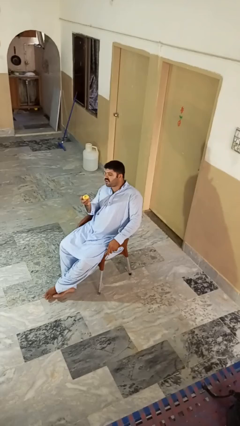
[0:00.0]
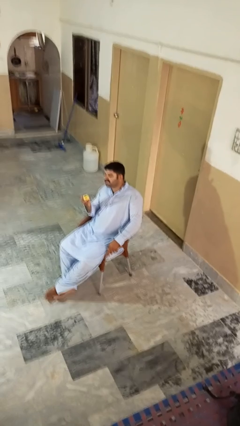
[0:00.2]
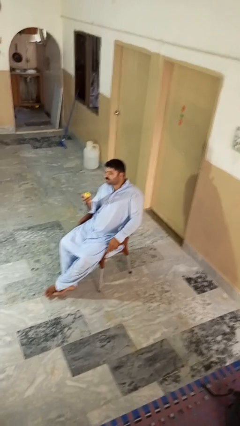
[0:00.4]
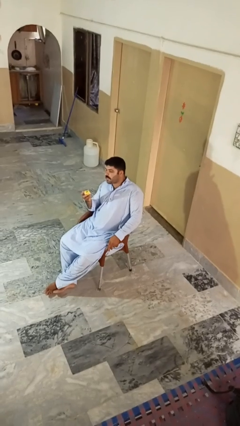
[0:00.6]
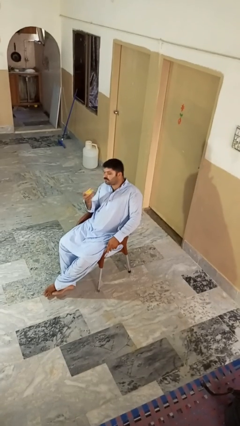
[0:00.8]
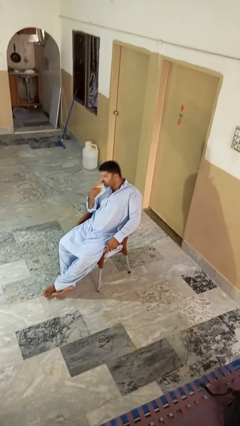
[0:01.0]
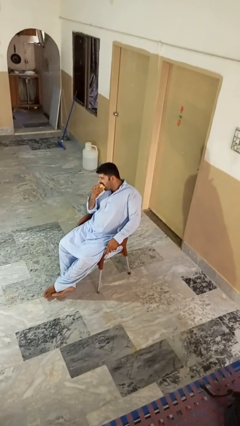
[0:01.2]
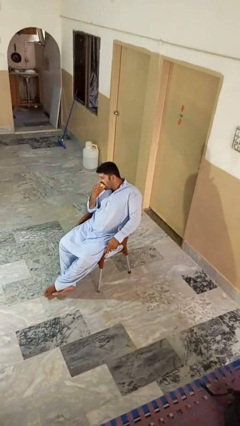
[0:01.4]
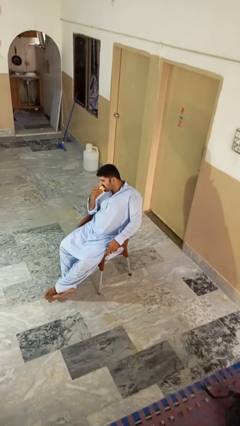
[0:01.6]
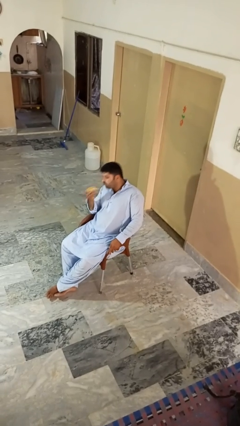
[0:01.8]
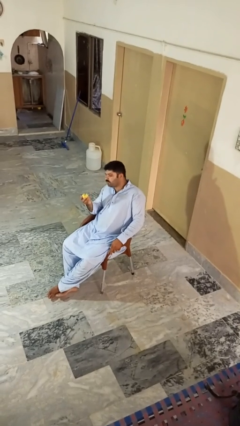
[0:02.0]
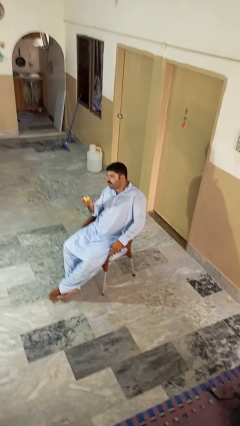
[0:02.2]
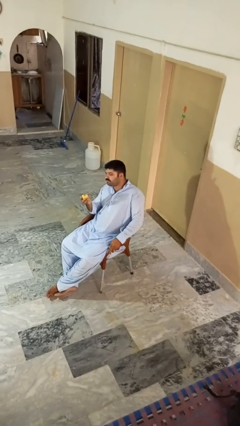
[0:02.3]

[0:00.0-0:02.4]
person eats apple

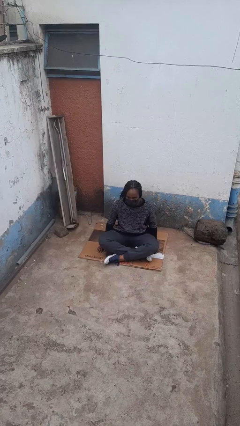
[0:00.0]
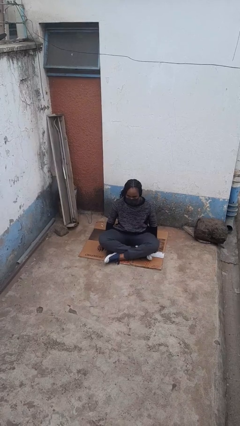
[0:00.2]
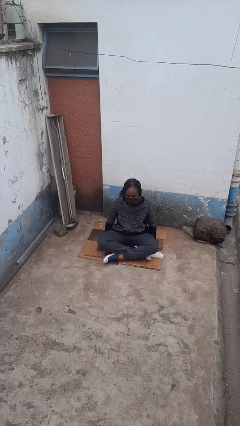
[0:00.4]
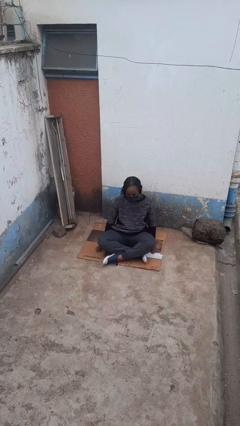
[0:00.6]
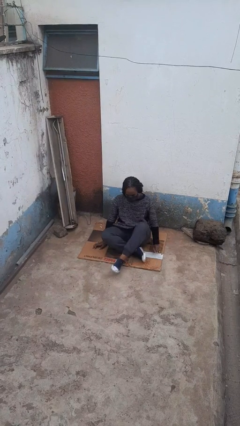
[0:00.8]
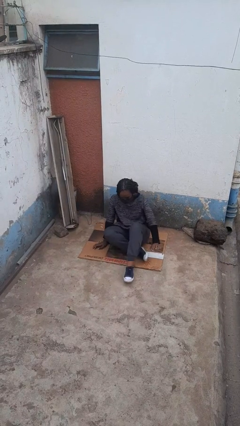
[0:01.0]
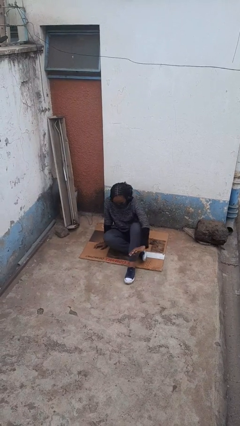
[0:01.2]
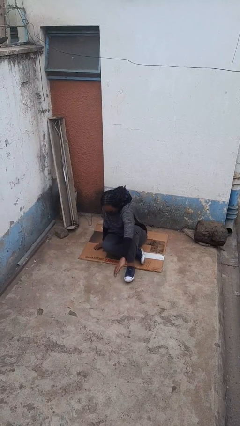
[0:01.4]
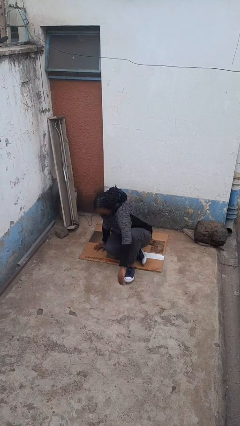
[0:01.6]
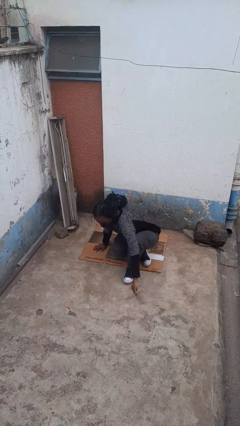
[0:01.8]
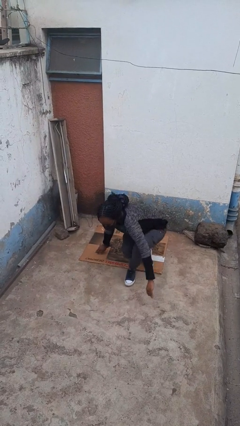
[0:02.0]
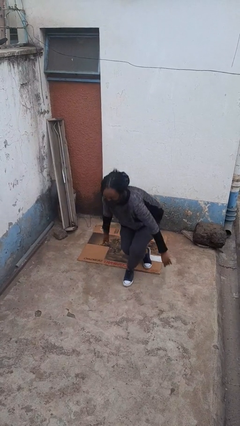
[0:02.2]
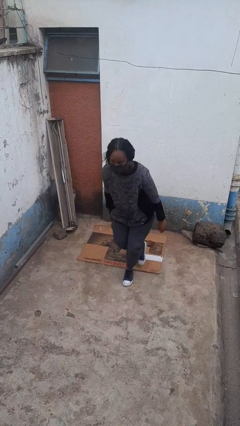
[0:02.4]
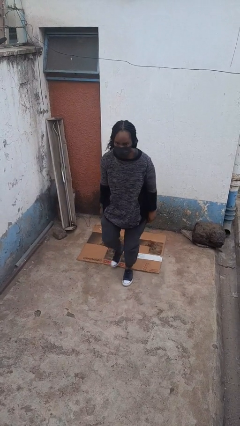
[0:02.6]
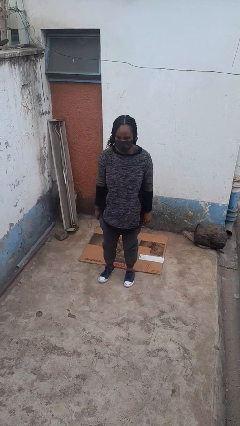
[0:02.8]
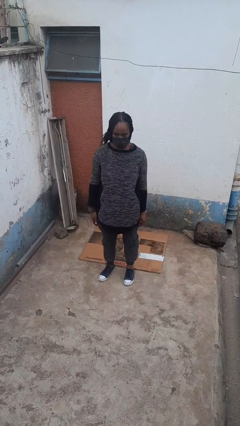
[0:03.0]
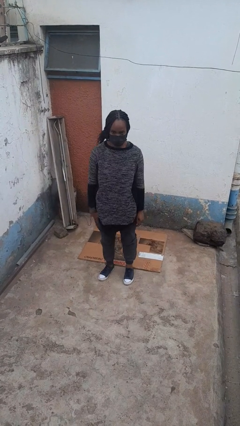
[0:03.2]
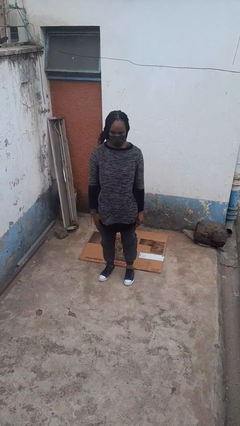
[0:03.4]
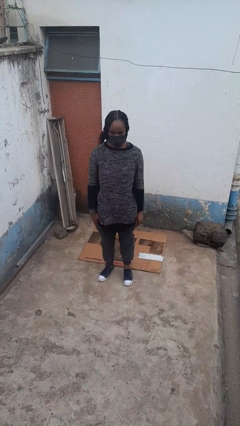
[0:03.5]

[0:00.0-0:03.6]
person stands up from floor

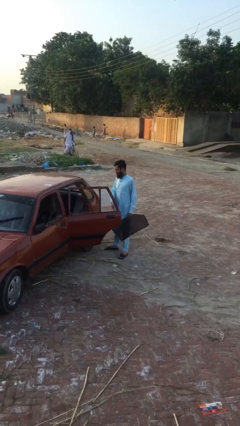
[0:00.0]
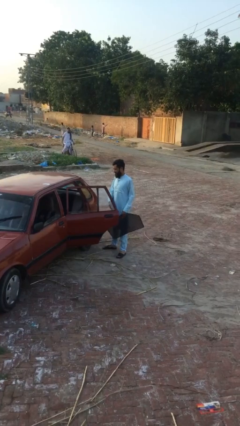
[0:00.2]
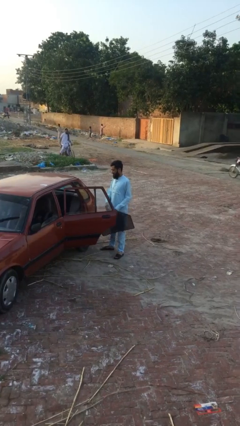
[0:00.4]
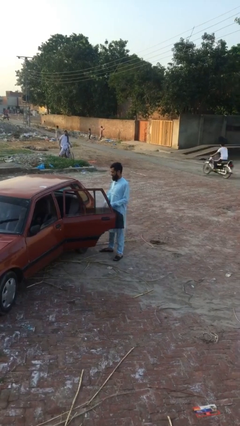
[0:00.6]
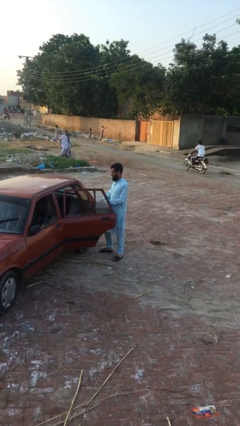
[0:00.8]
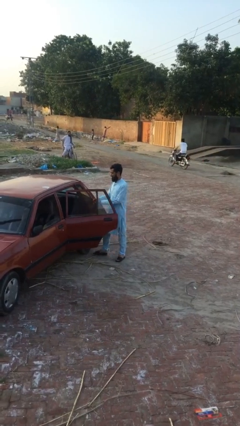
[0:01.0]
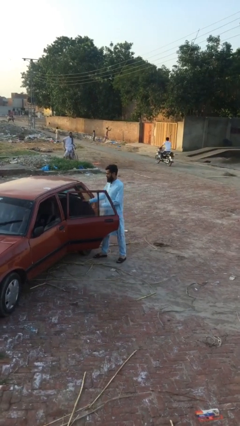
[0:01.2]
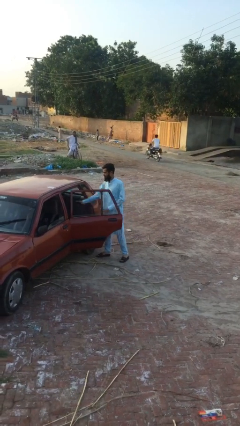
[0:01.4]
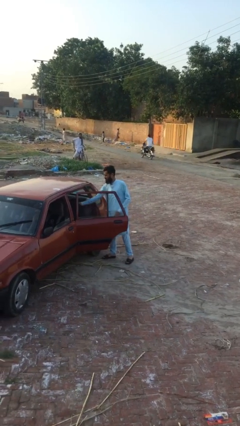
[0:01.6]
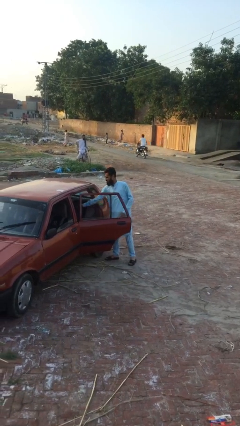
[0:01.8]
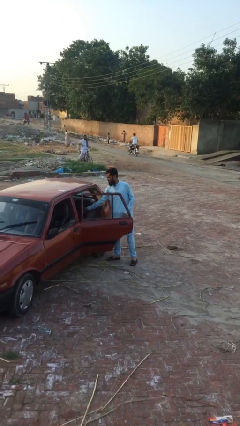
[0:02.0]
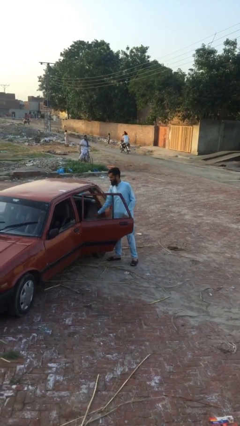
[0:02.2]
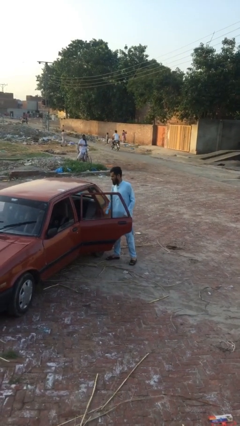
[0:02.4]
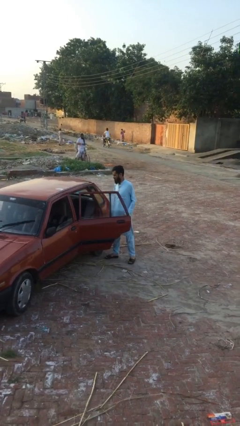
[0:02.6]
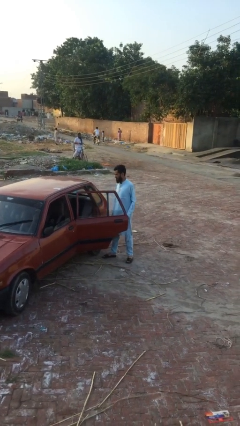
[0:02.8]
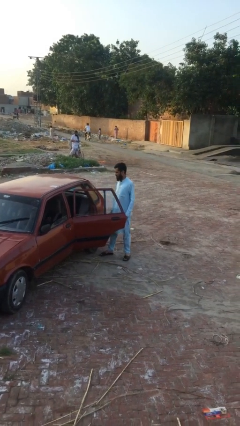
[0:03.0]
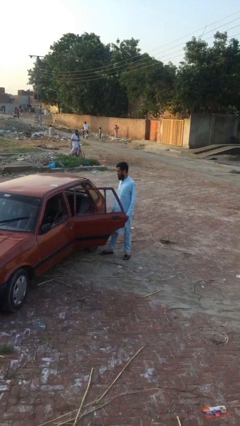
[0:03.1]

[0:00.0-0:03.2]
person loads car

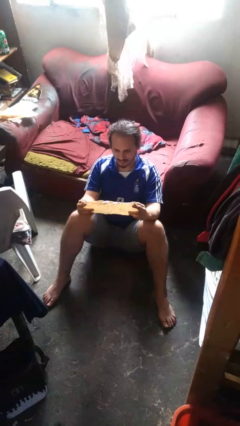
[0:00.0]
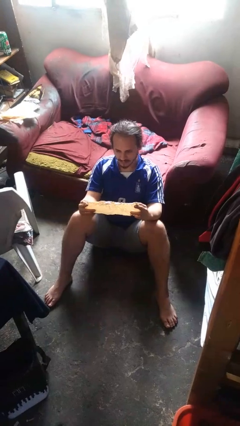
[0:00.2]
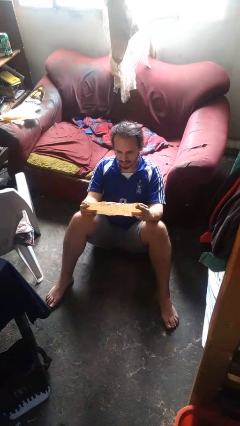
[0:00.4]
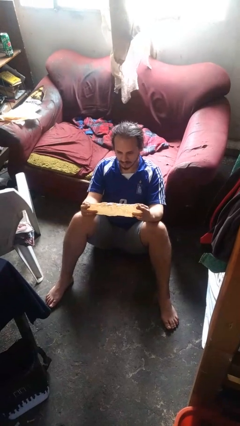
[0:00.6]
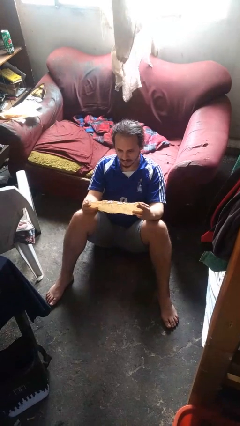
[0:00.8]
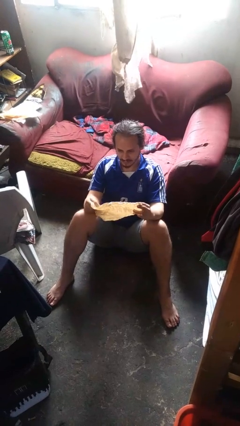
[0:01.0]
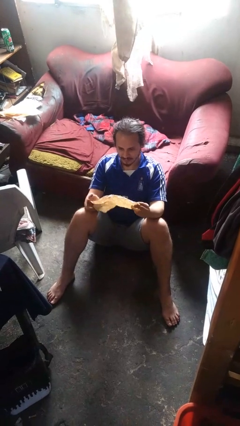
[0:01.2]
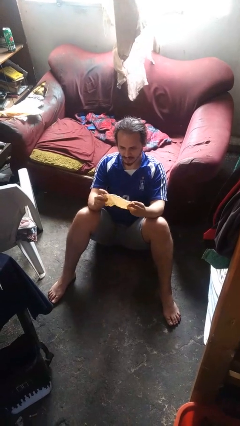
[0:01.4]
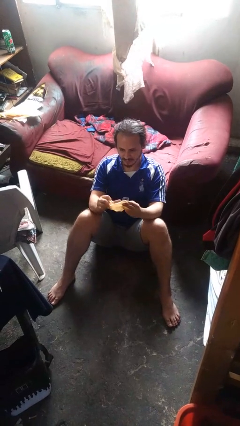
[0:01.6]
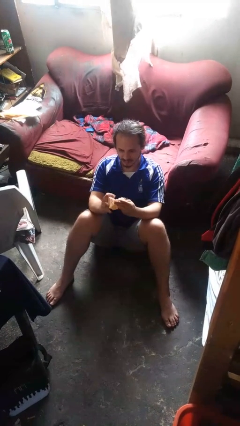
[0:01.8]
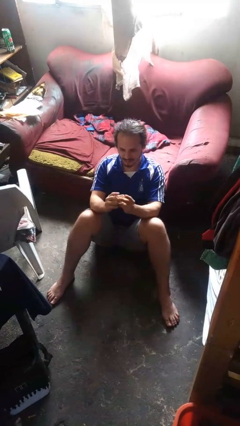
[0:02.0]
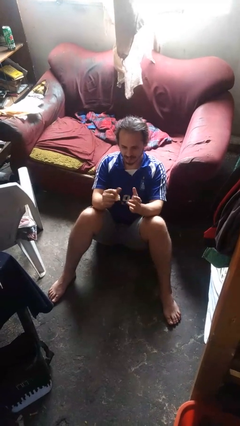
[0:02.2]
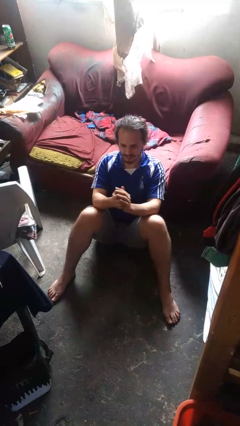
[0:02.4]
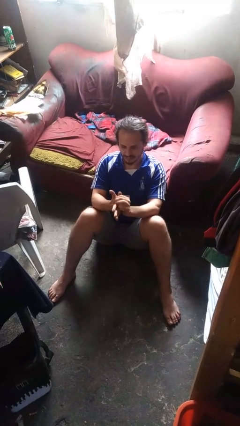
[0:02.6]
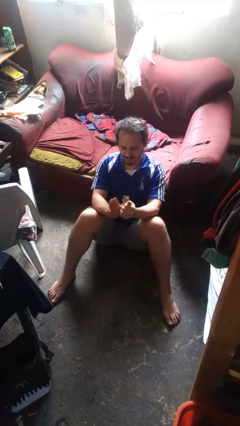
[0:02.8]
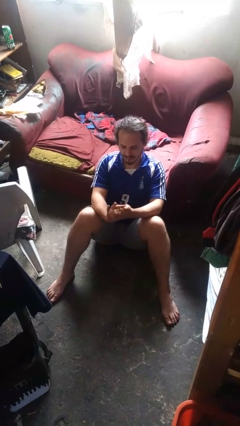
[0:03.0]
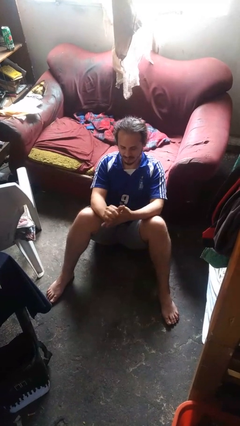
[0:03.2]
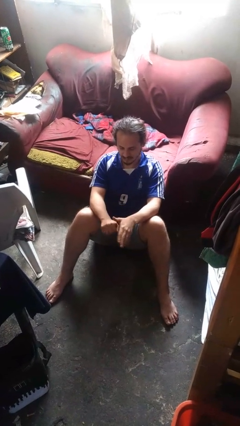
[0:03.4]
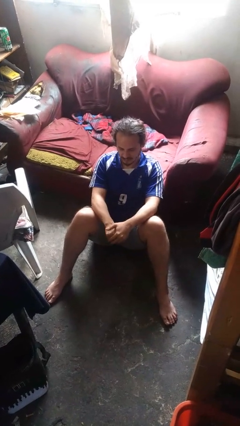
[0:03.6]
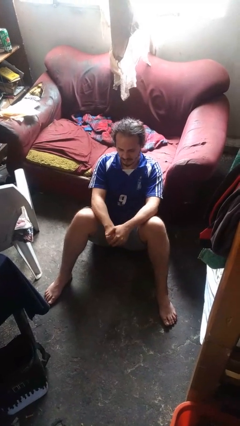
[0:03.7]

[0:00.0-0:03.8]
person crumples paper

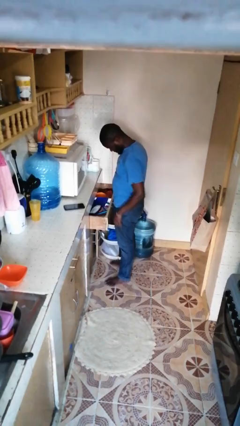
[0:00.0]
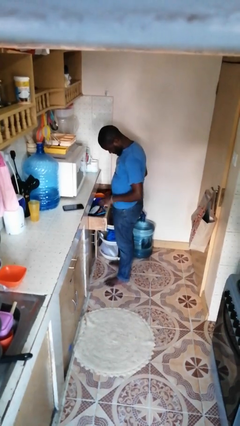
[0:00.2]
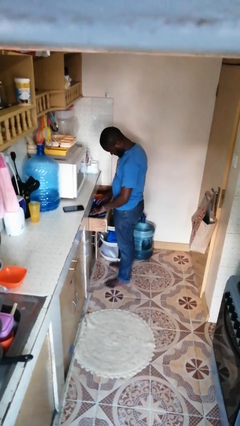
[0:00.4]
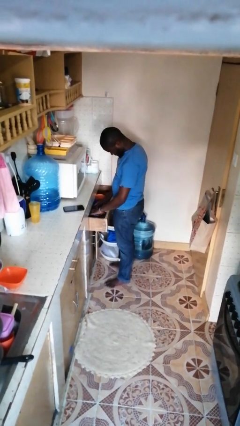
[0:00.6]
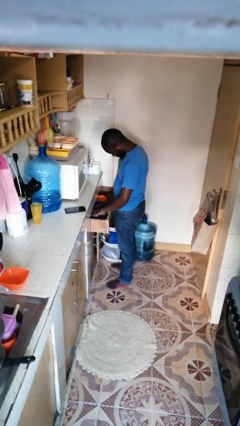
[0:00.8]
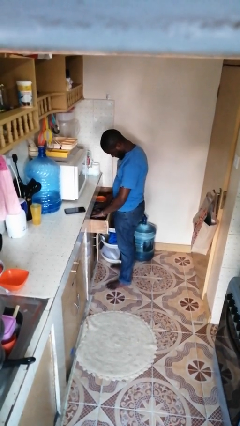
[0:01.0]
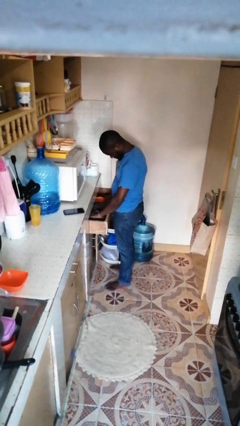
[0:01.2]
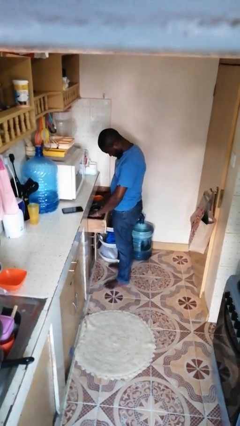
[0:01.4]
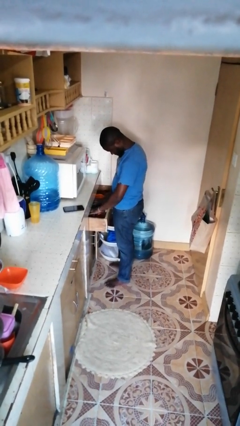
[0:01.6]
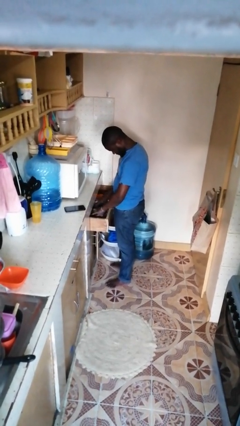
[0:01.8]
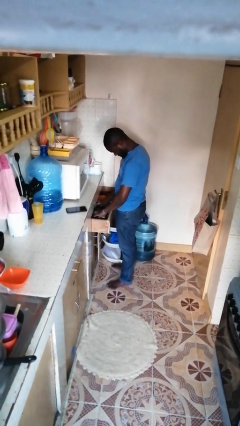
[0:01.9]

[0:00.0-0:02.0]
person searches in kitchen drawer

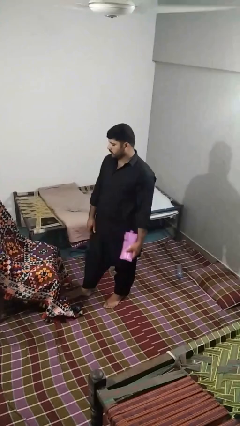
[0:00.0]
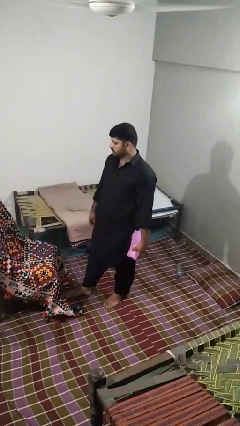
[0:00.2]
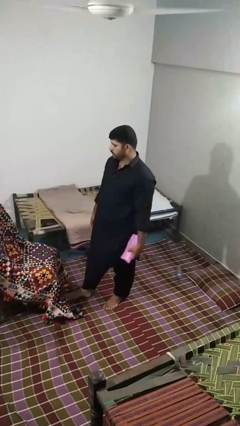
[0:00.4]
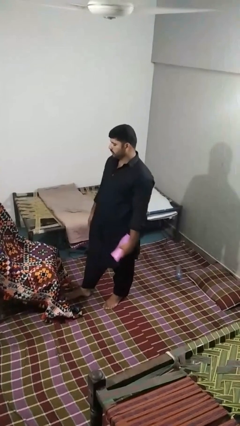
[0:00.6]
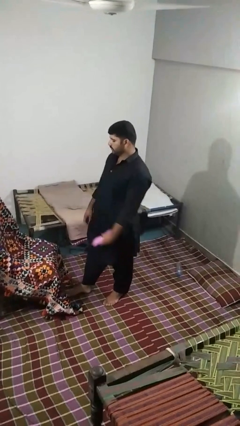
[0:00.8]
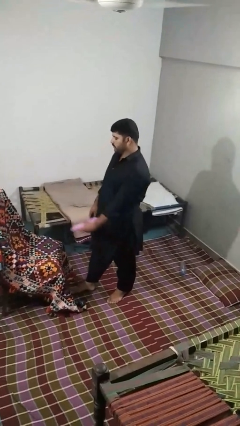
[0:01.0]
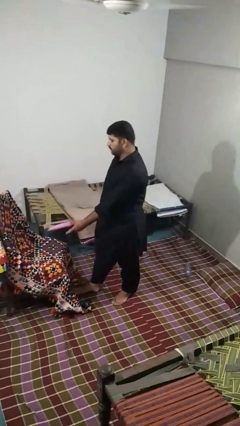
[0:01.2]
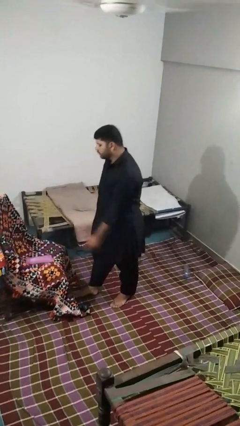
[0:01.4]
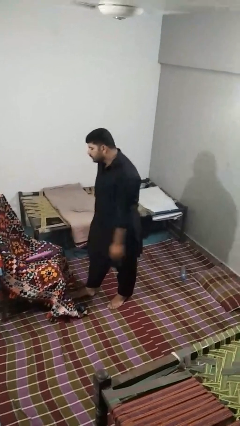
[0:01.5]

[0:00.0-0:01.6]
person puts down object on couch

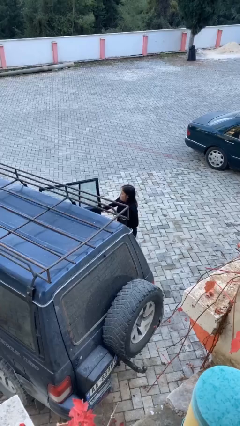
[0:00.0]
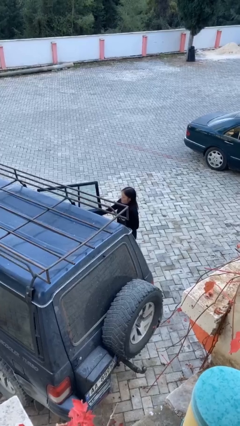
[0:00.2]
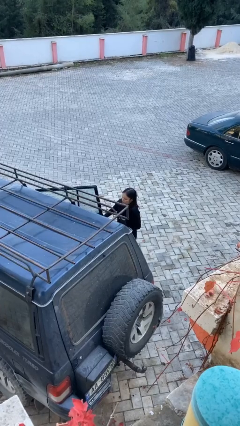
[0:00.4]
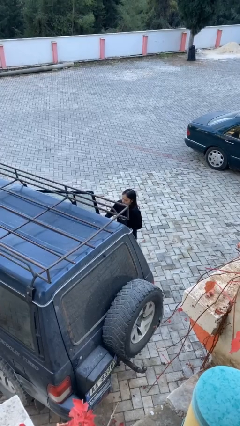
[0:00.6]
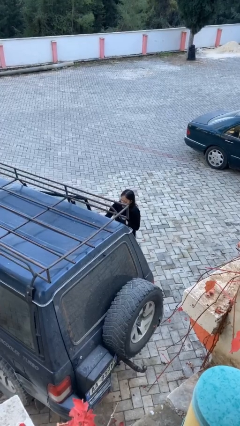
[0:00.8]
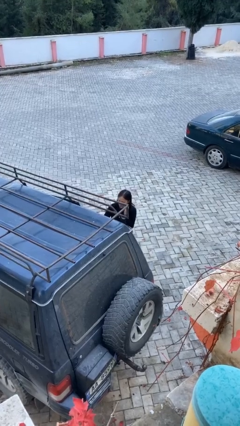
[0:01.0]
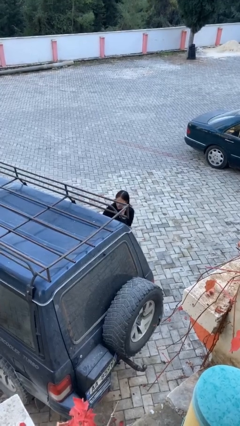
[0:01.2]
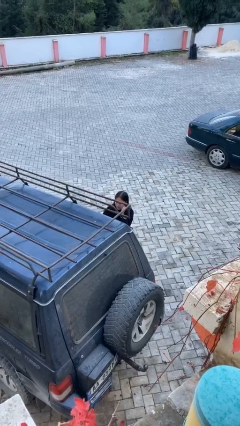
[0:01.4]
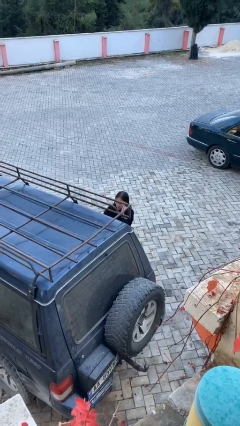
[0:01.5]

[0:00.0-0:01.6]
person closes car door
